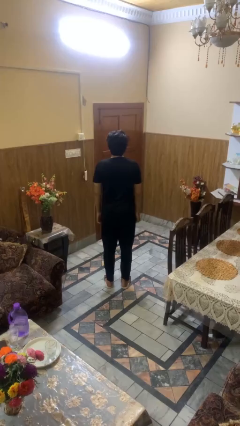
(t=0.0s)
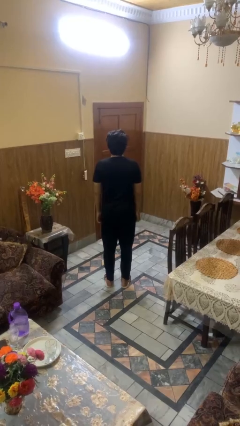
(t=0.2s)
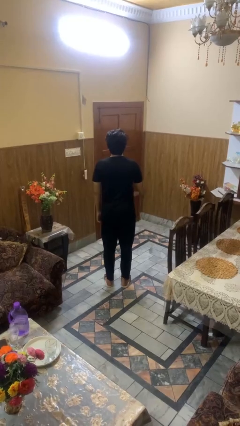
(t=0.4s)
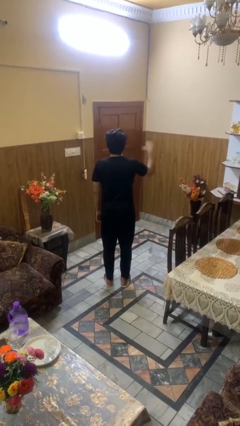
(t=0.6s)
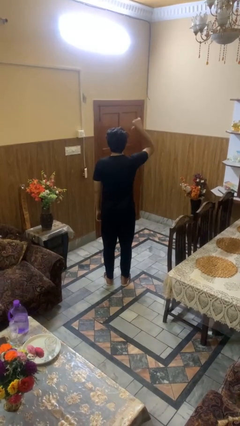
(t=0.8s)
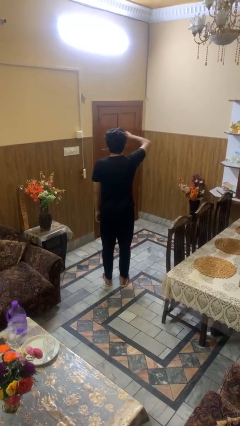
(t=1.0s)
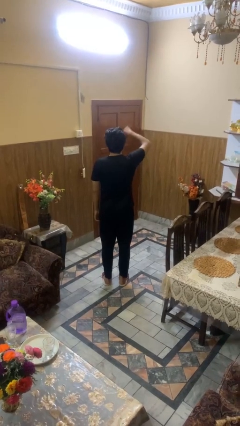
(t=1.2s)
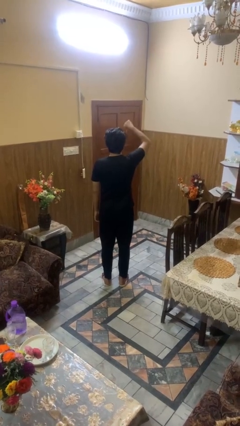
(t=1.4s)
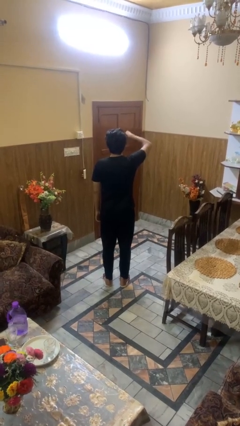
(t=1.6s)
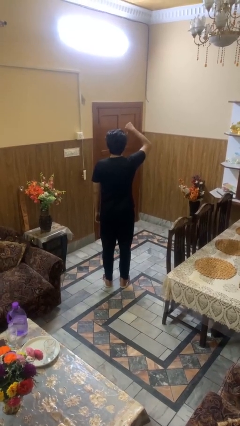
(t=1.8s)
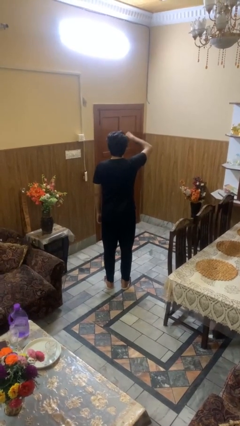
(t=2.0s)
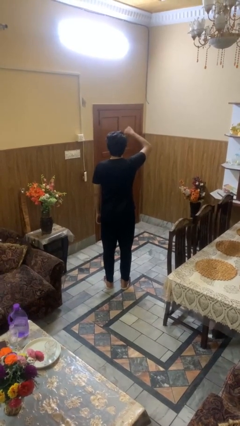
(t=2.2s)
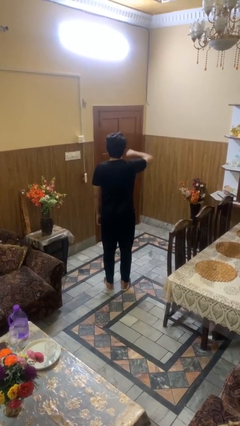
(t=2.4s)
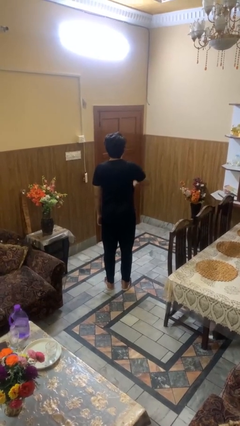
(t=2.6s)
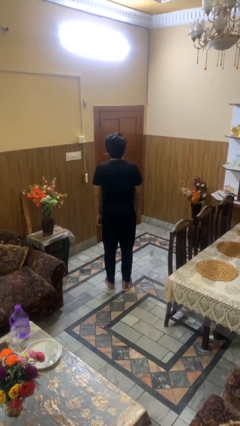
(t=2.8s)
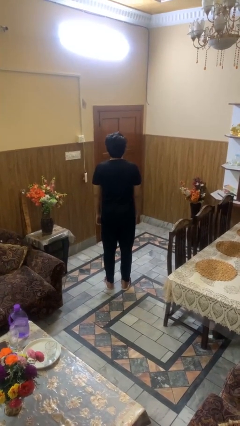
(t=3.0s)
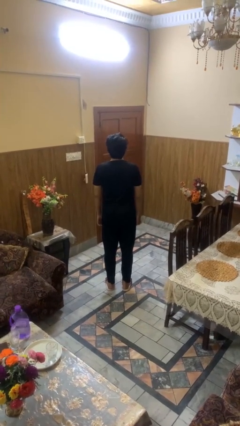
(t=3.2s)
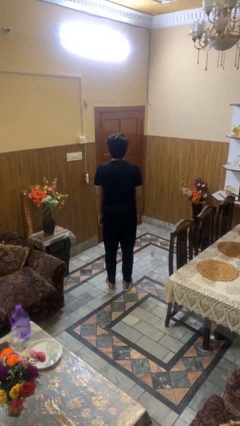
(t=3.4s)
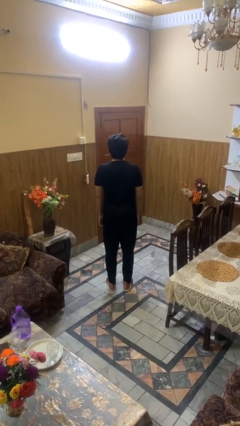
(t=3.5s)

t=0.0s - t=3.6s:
person gestures thumbs down

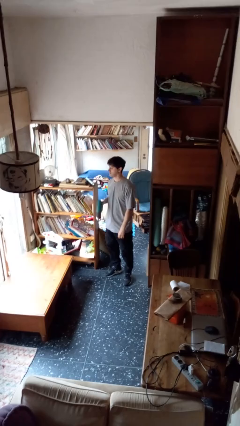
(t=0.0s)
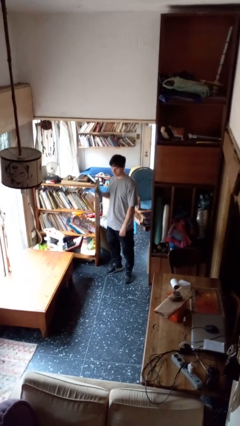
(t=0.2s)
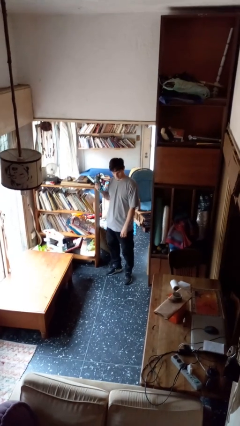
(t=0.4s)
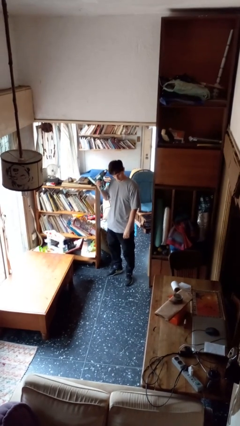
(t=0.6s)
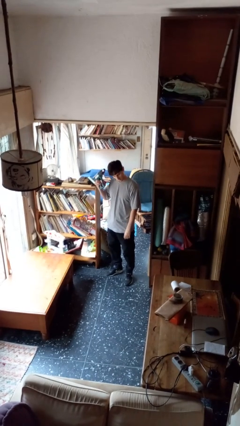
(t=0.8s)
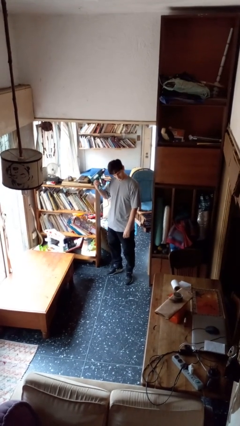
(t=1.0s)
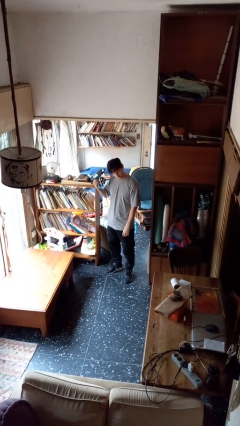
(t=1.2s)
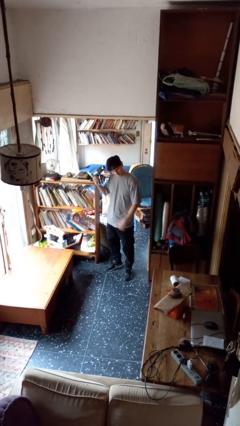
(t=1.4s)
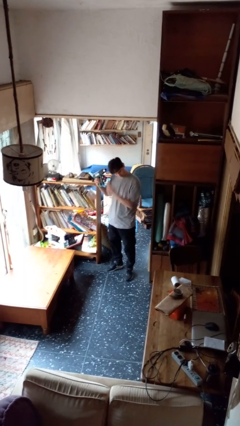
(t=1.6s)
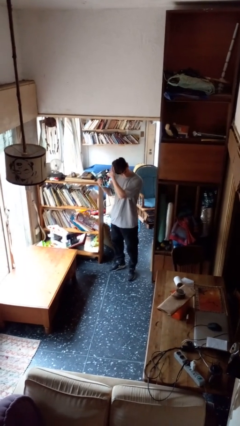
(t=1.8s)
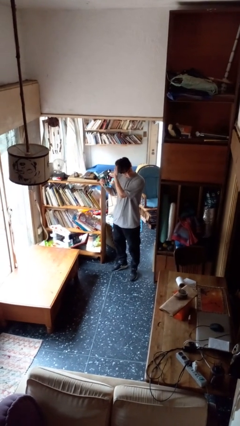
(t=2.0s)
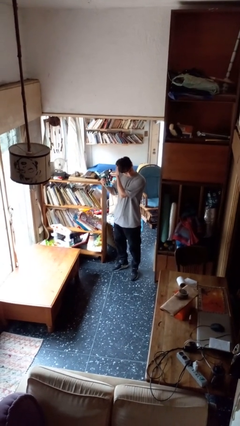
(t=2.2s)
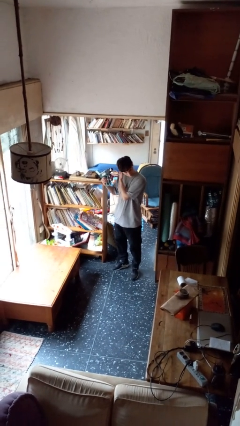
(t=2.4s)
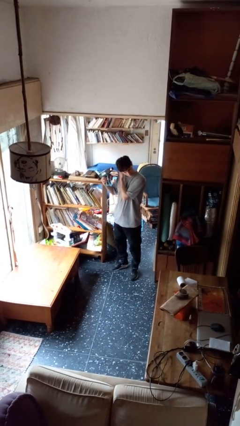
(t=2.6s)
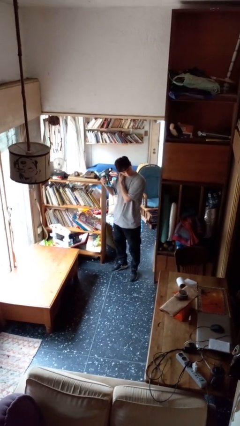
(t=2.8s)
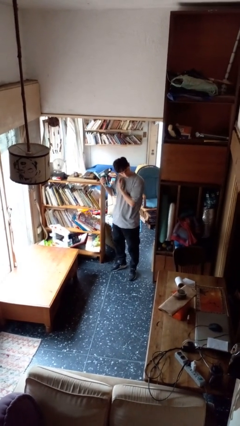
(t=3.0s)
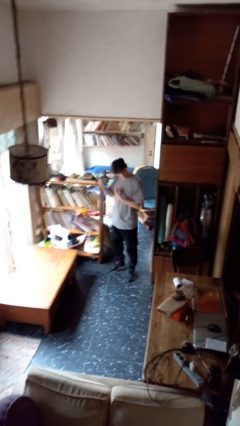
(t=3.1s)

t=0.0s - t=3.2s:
person dries hair with hairdryer

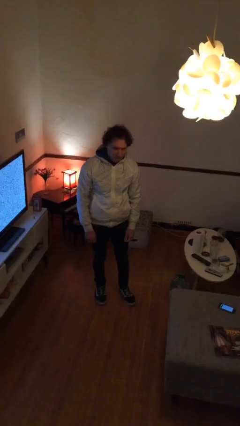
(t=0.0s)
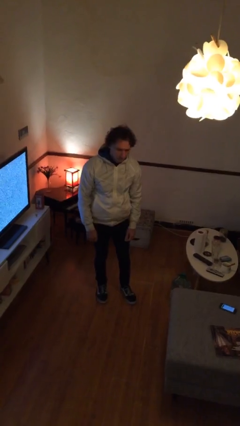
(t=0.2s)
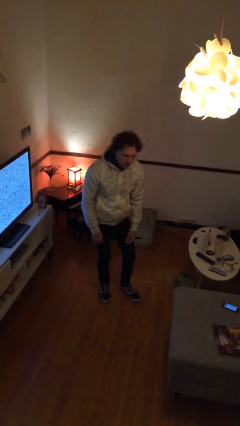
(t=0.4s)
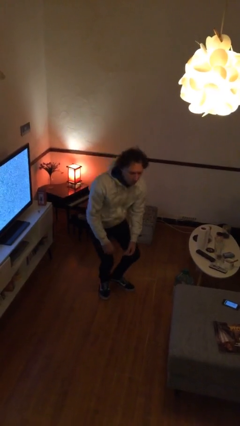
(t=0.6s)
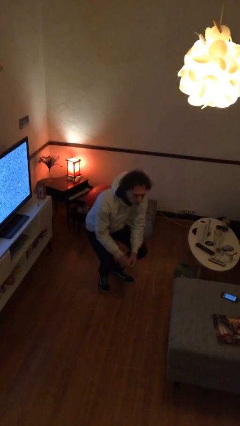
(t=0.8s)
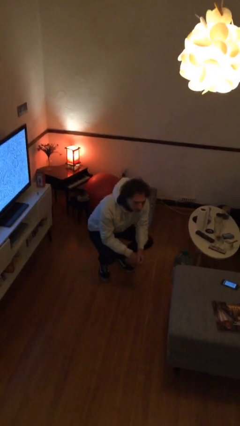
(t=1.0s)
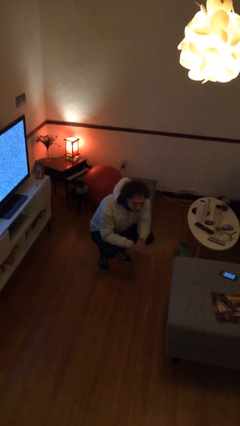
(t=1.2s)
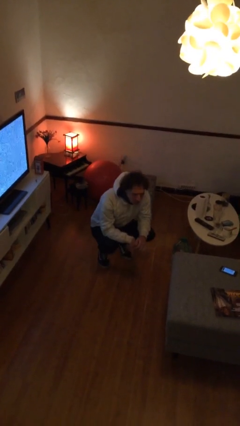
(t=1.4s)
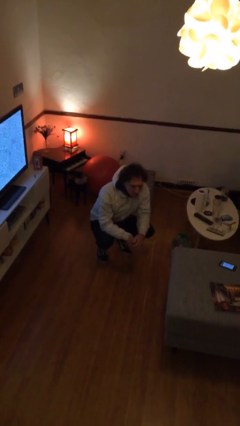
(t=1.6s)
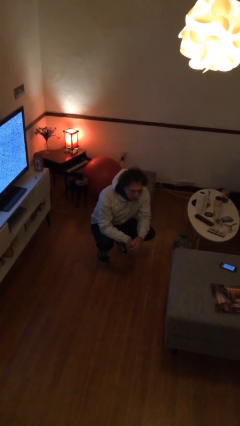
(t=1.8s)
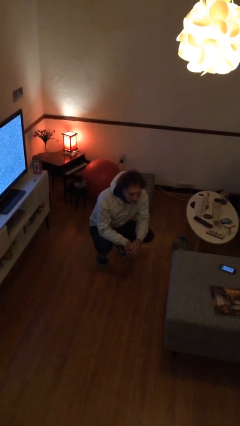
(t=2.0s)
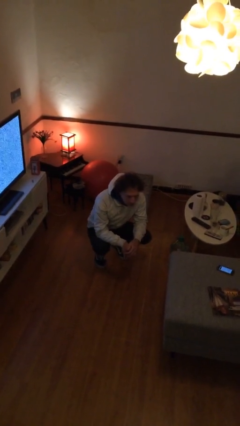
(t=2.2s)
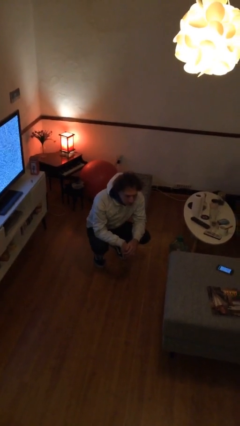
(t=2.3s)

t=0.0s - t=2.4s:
person squats

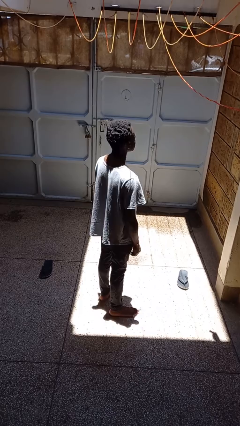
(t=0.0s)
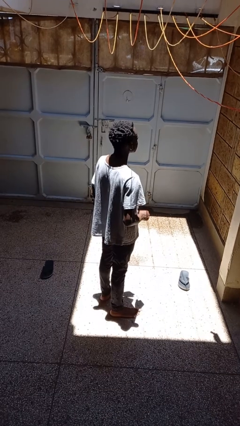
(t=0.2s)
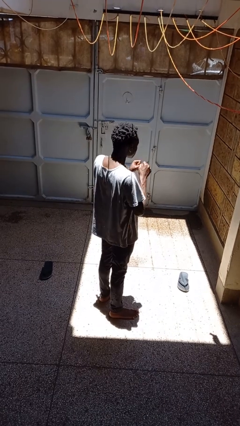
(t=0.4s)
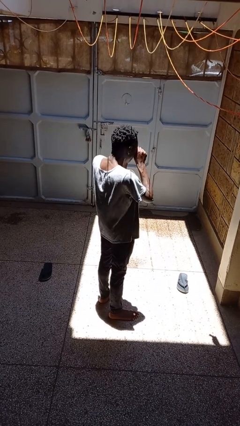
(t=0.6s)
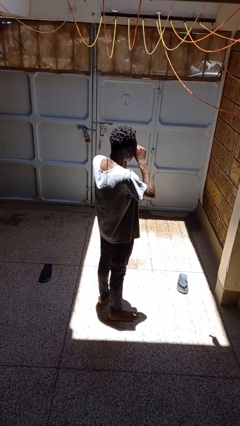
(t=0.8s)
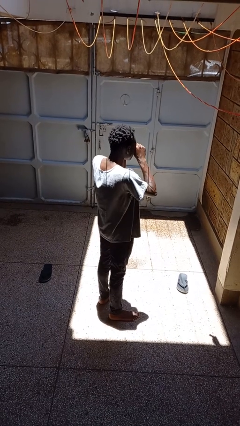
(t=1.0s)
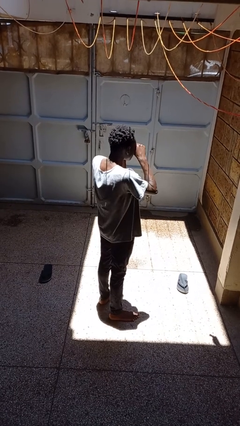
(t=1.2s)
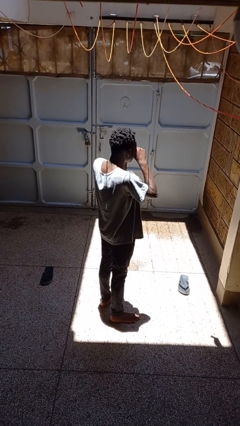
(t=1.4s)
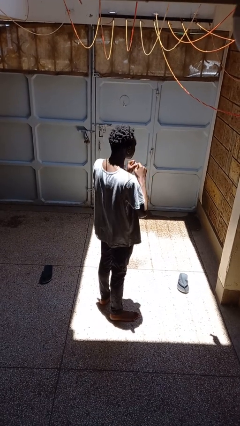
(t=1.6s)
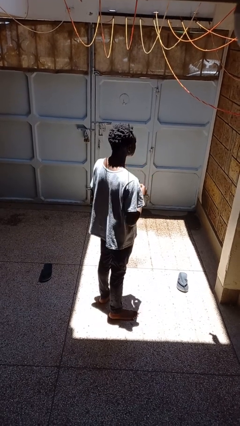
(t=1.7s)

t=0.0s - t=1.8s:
person rubs eyes

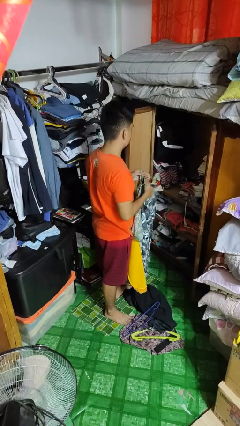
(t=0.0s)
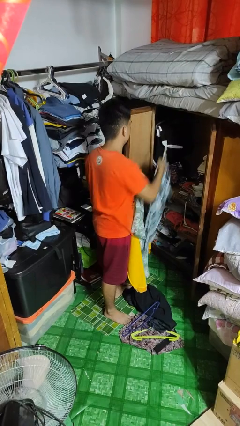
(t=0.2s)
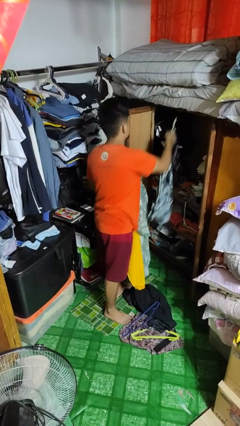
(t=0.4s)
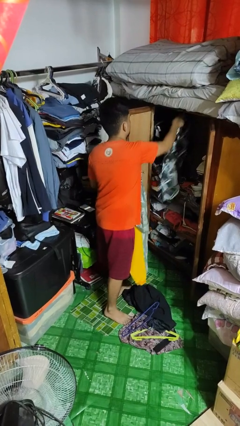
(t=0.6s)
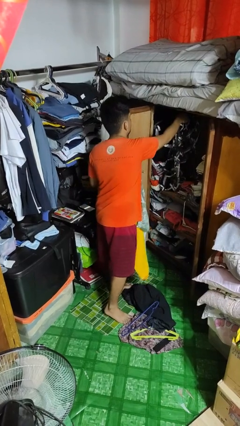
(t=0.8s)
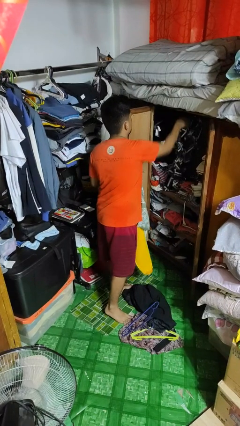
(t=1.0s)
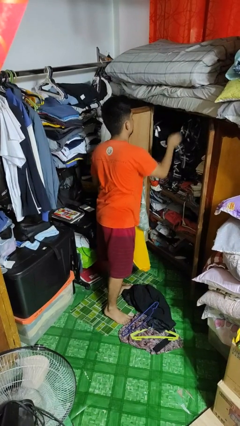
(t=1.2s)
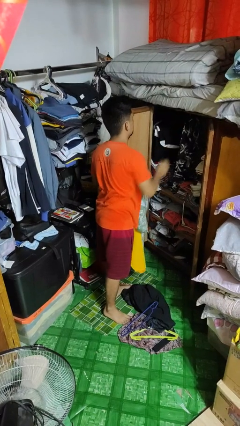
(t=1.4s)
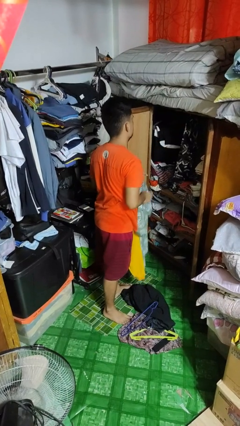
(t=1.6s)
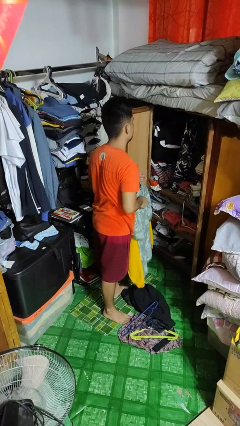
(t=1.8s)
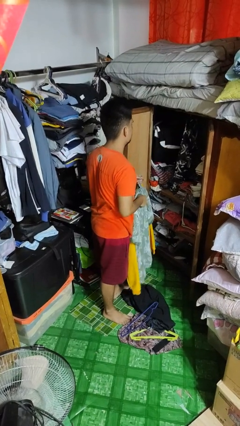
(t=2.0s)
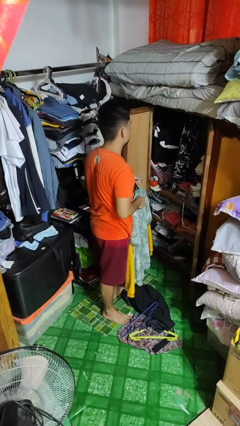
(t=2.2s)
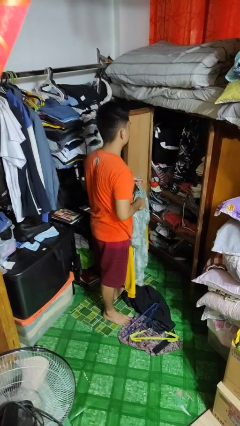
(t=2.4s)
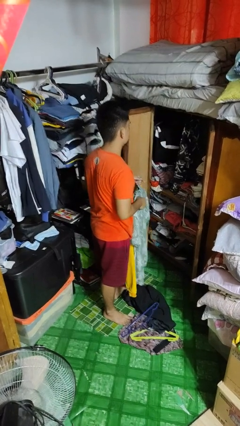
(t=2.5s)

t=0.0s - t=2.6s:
person puts clothes into closet

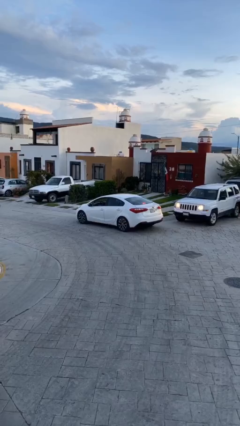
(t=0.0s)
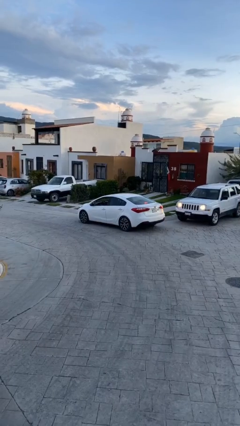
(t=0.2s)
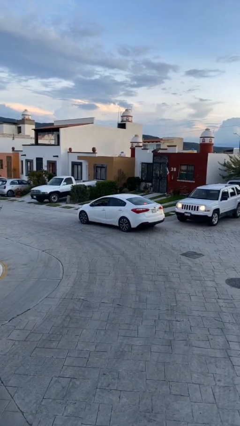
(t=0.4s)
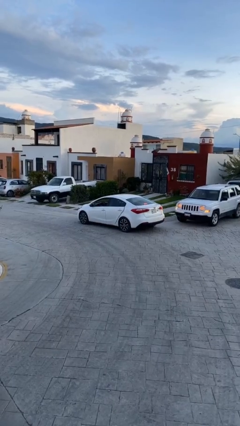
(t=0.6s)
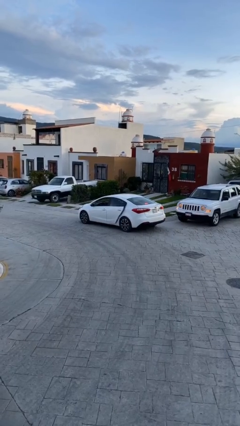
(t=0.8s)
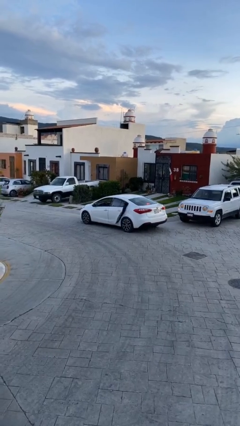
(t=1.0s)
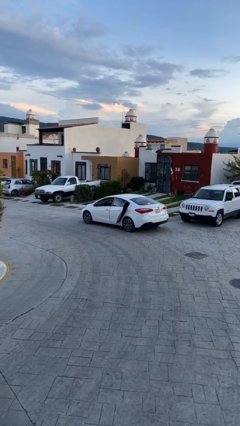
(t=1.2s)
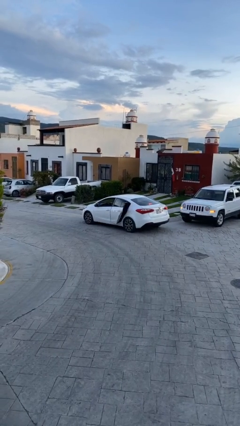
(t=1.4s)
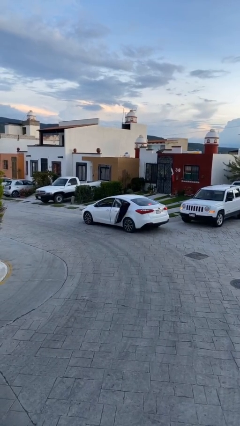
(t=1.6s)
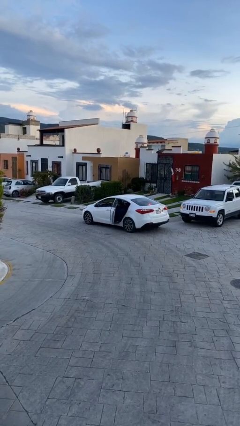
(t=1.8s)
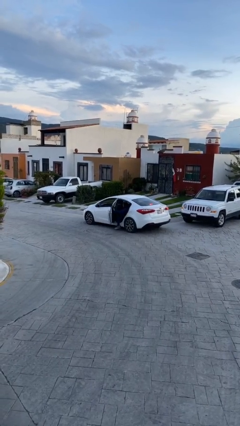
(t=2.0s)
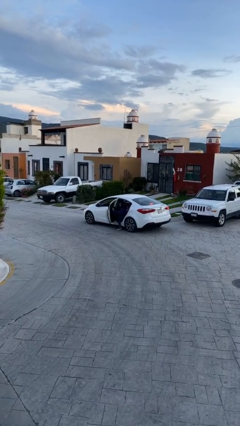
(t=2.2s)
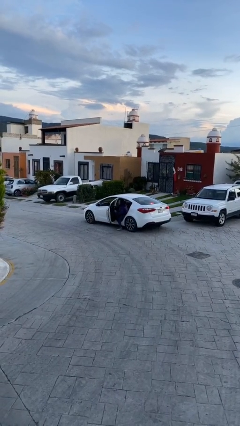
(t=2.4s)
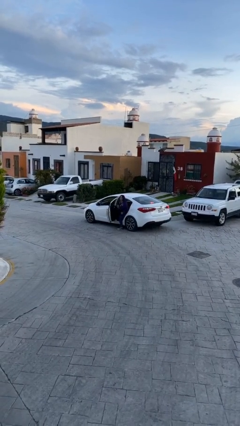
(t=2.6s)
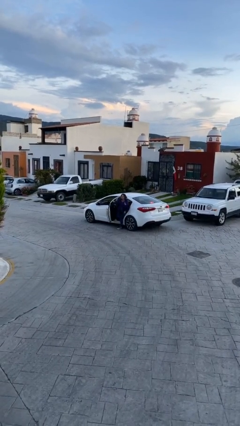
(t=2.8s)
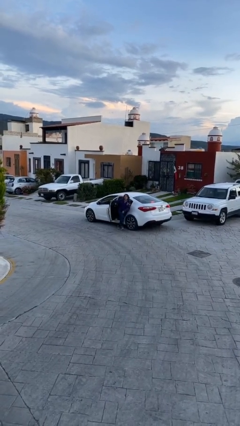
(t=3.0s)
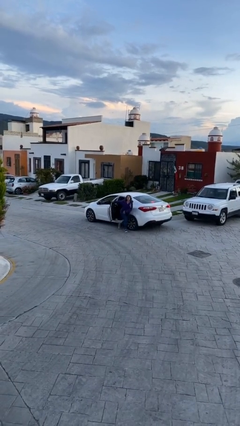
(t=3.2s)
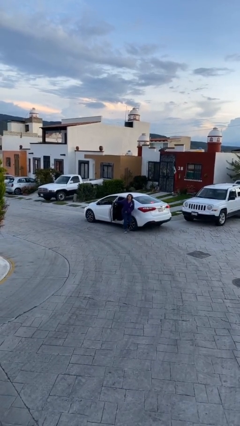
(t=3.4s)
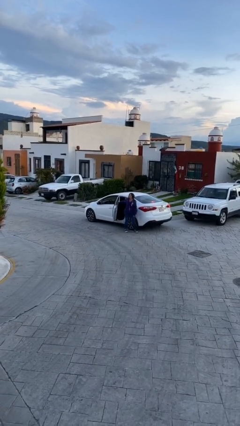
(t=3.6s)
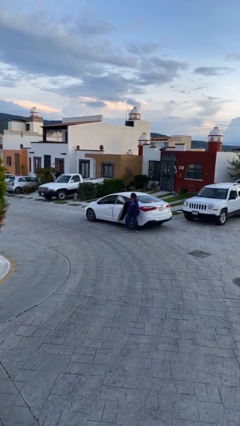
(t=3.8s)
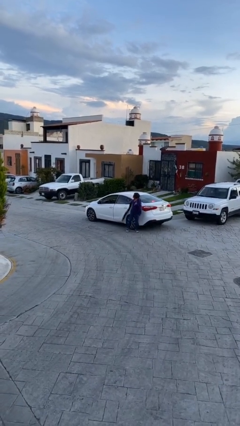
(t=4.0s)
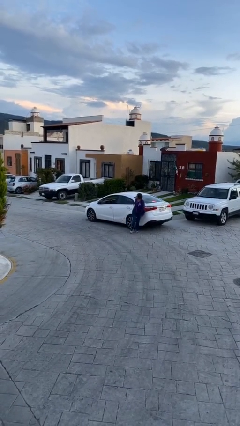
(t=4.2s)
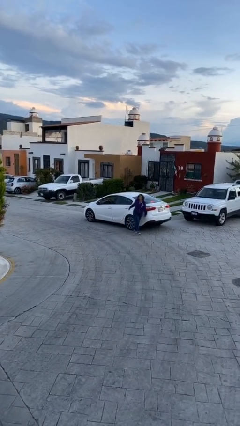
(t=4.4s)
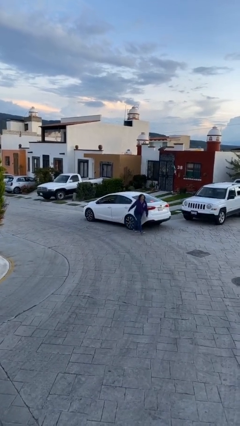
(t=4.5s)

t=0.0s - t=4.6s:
car drops off person
